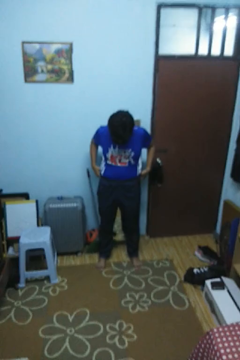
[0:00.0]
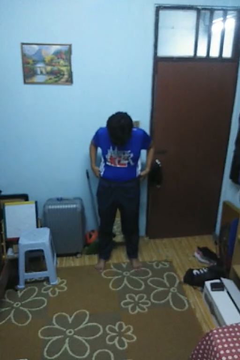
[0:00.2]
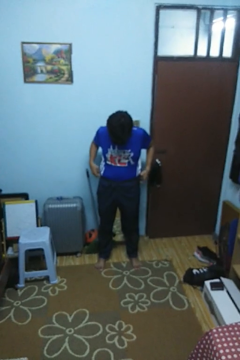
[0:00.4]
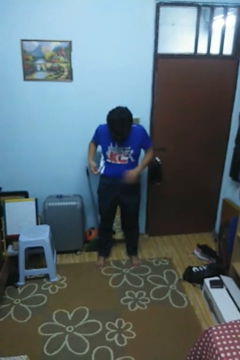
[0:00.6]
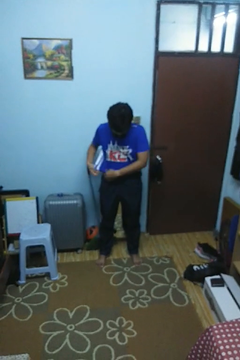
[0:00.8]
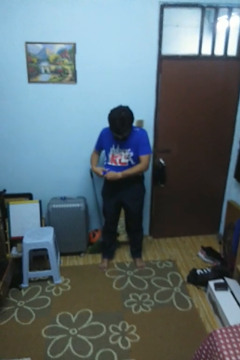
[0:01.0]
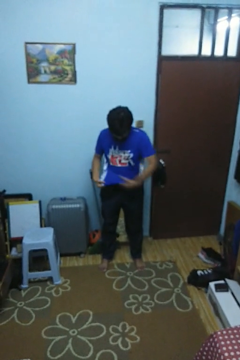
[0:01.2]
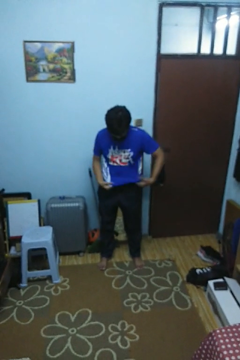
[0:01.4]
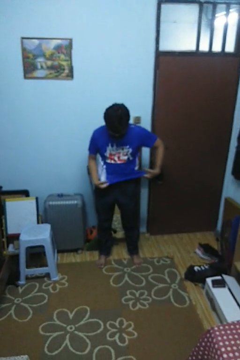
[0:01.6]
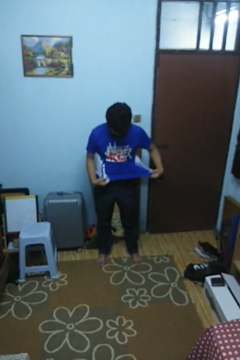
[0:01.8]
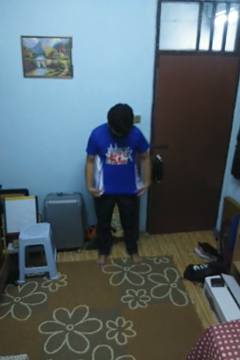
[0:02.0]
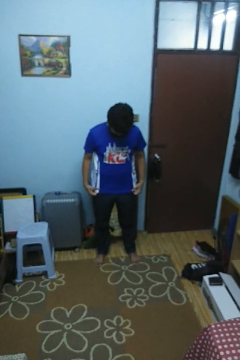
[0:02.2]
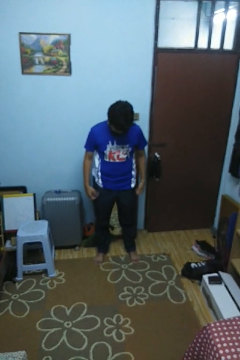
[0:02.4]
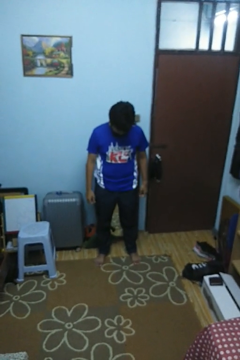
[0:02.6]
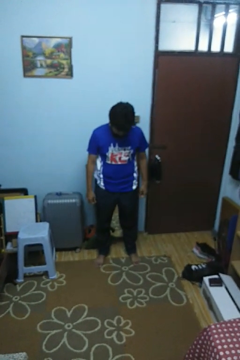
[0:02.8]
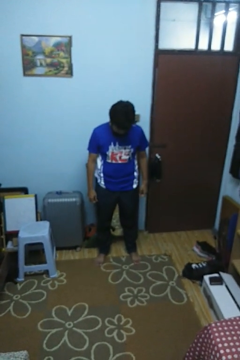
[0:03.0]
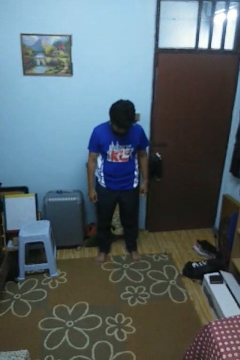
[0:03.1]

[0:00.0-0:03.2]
person untucks shirt

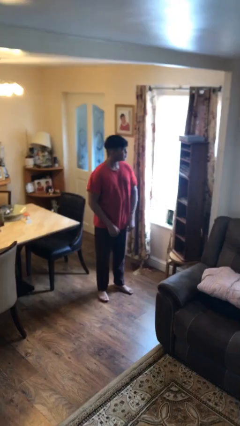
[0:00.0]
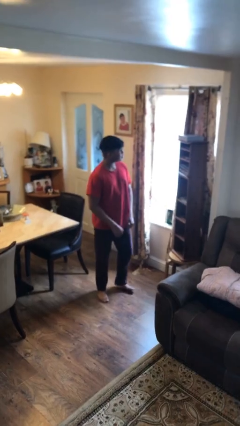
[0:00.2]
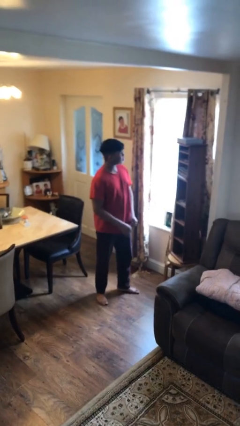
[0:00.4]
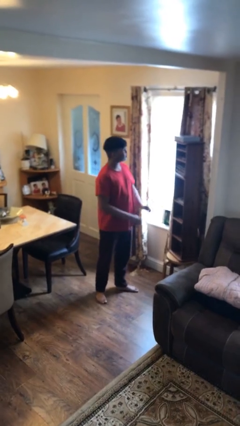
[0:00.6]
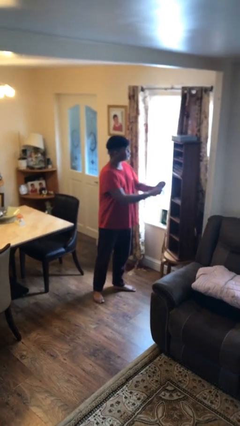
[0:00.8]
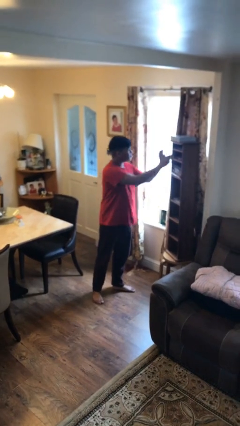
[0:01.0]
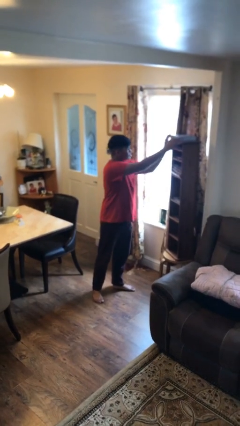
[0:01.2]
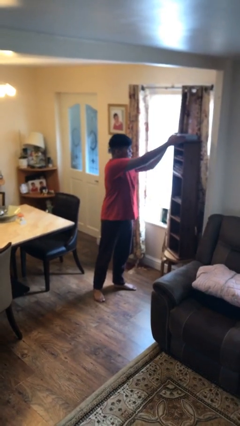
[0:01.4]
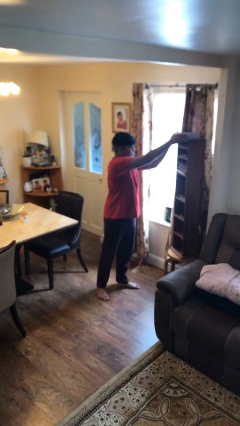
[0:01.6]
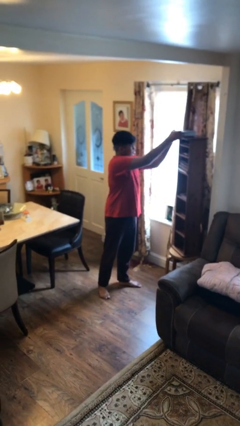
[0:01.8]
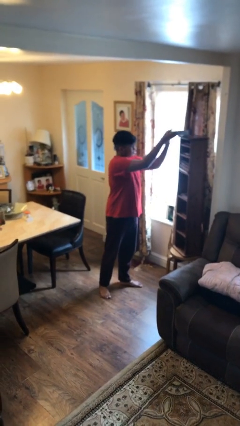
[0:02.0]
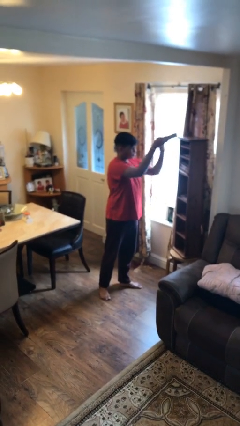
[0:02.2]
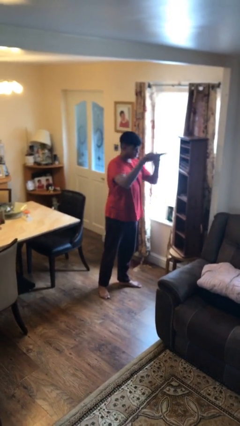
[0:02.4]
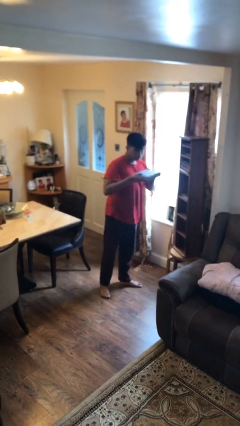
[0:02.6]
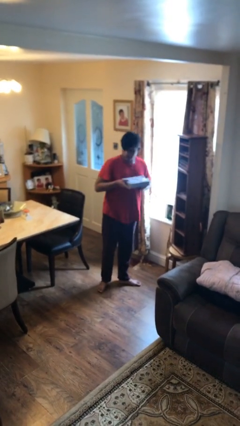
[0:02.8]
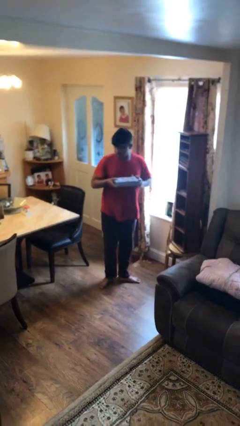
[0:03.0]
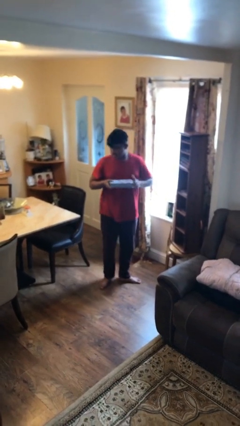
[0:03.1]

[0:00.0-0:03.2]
person picks up object from shelf

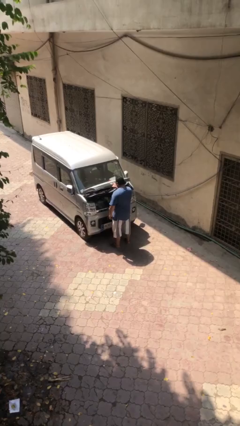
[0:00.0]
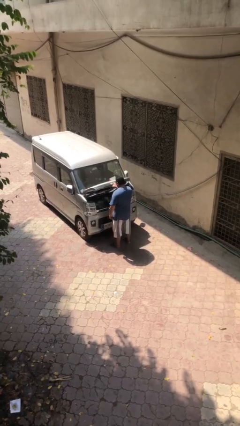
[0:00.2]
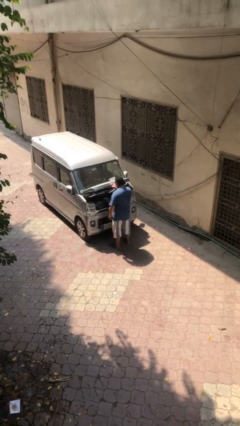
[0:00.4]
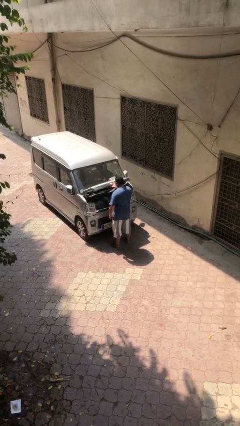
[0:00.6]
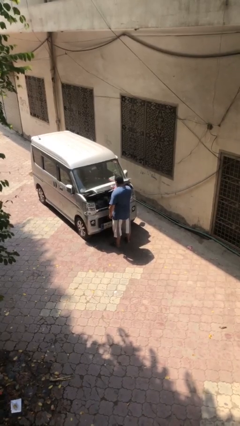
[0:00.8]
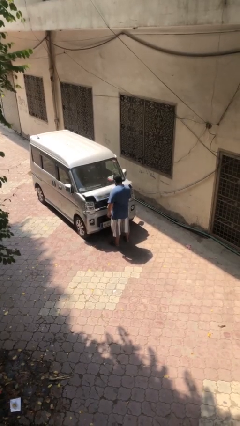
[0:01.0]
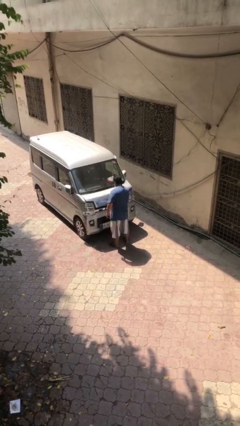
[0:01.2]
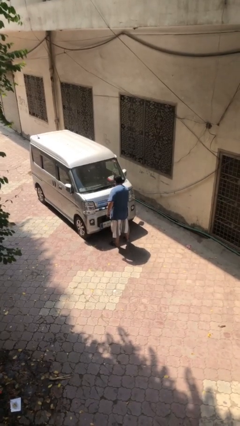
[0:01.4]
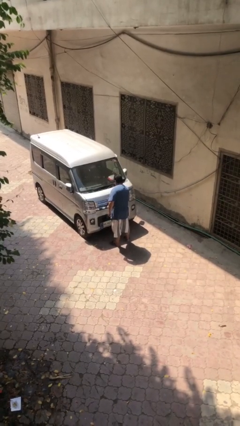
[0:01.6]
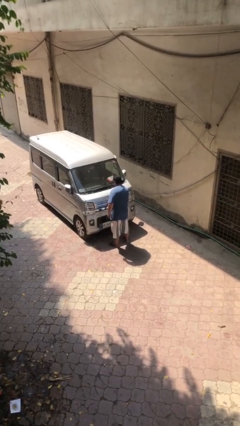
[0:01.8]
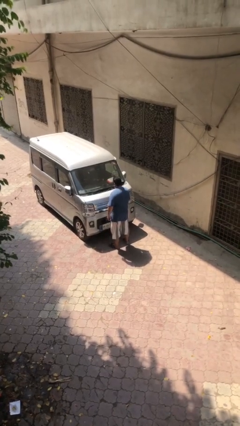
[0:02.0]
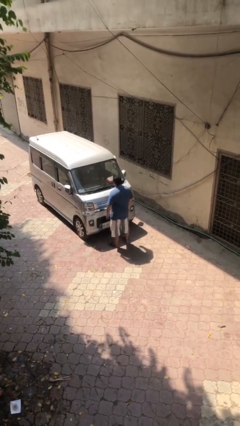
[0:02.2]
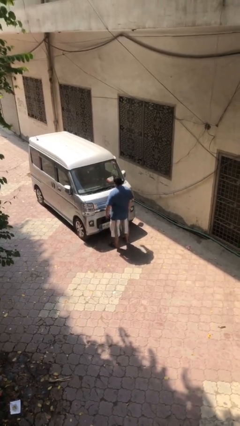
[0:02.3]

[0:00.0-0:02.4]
person closes car hood

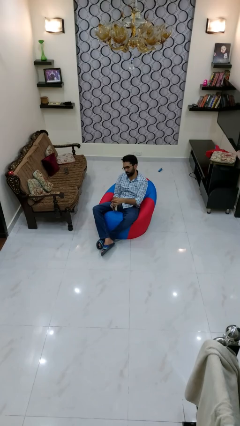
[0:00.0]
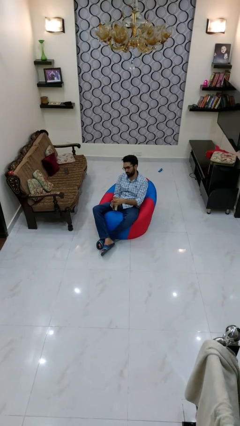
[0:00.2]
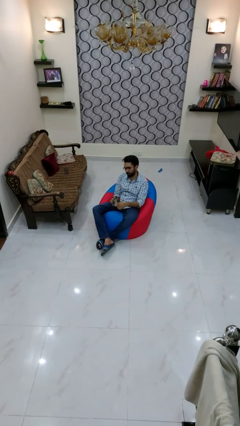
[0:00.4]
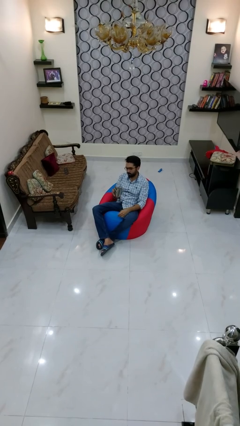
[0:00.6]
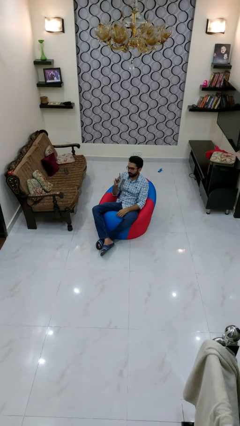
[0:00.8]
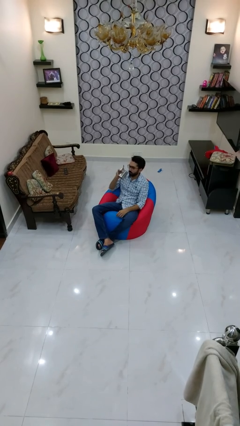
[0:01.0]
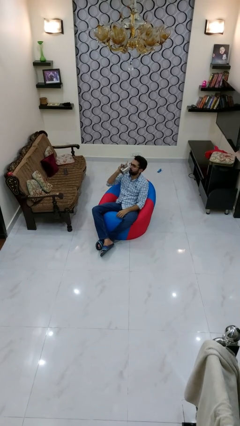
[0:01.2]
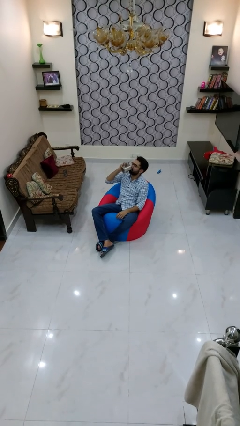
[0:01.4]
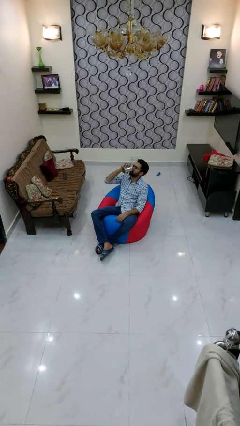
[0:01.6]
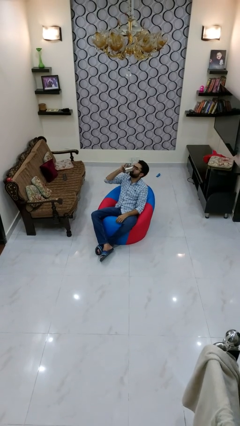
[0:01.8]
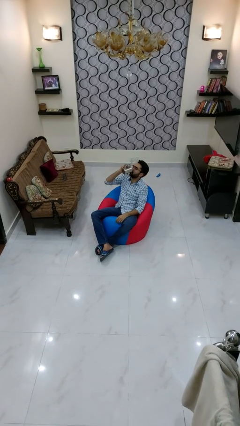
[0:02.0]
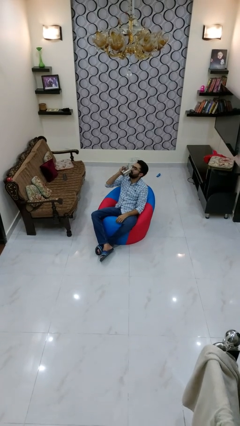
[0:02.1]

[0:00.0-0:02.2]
person drinks from mug

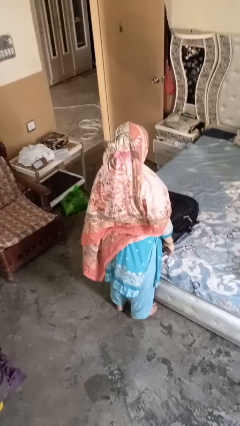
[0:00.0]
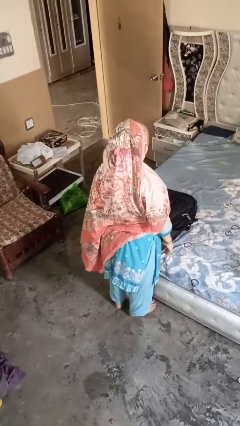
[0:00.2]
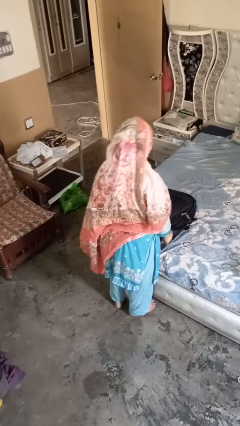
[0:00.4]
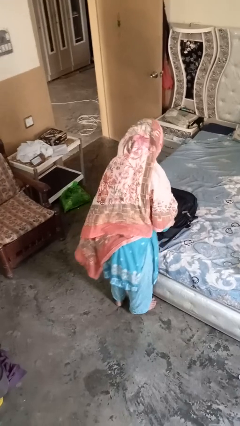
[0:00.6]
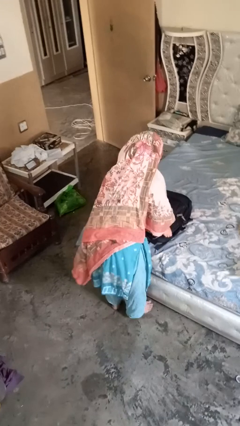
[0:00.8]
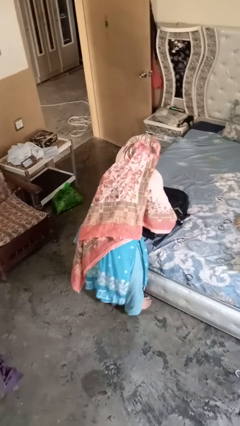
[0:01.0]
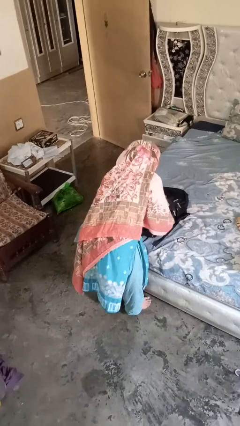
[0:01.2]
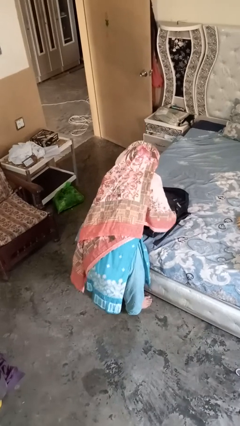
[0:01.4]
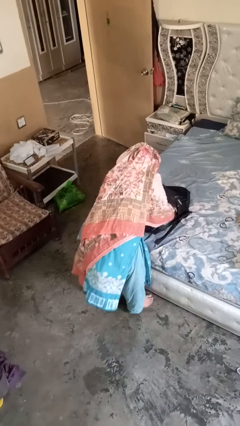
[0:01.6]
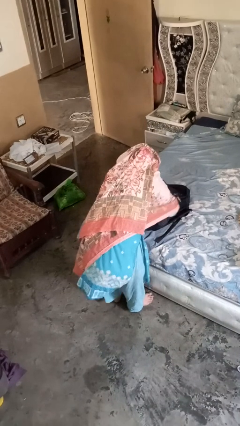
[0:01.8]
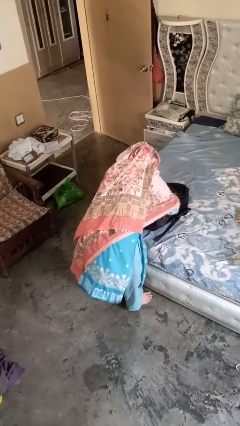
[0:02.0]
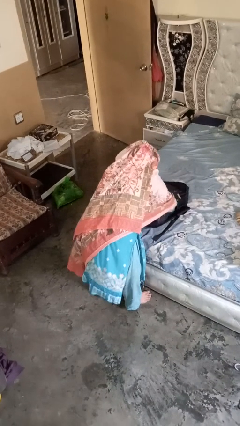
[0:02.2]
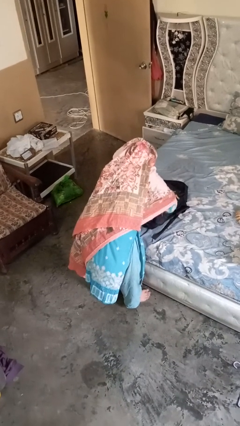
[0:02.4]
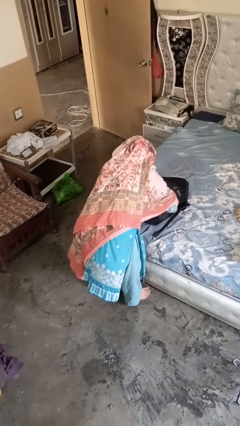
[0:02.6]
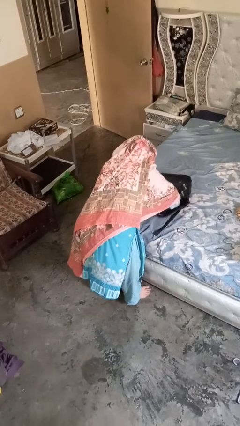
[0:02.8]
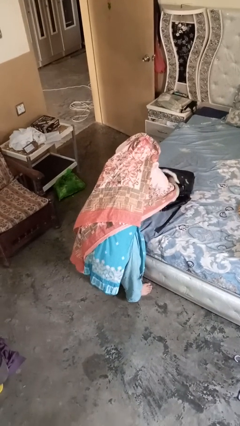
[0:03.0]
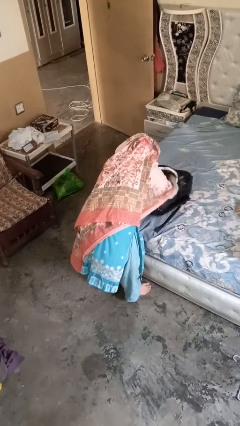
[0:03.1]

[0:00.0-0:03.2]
person searches in bag

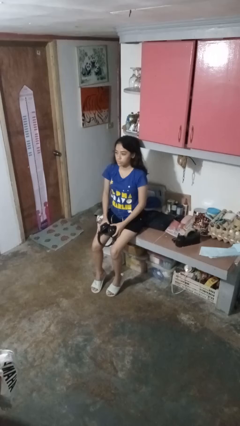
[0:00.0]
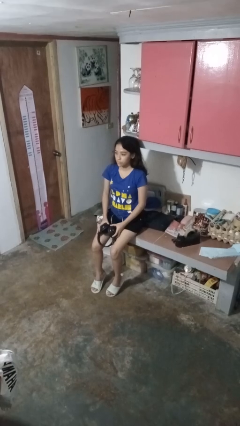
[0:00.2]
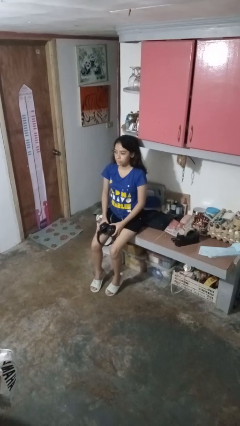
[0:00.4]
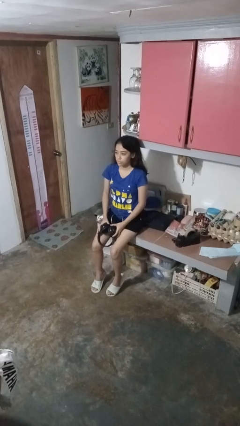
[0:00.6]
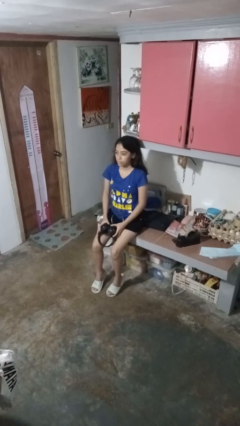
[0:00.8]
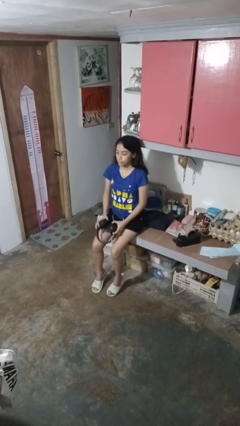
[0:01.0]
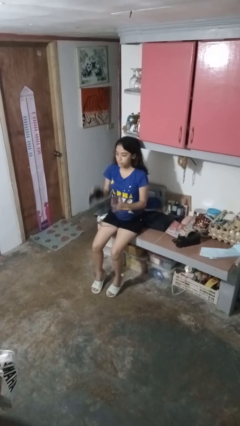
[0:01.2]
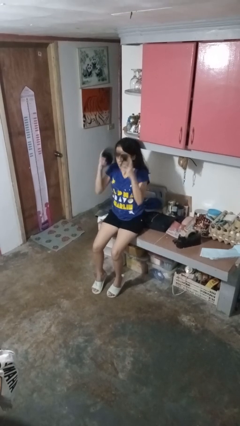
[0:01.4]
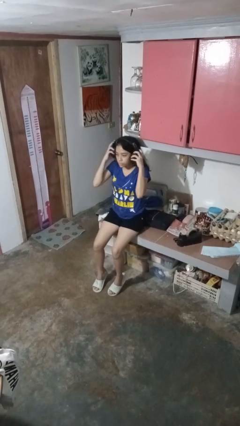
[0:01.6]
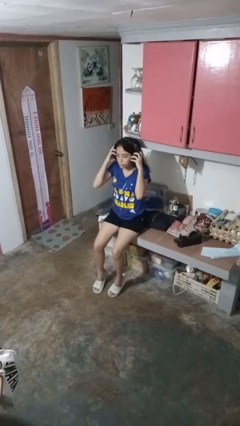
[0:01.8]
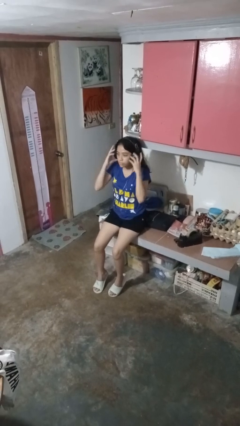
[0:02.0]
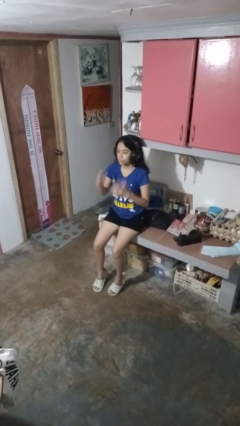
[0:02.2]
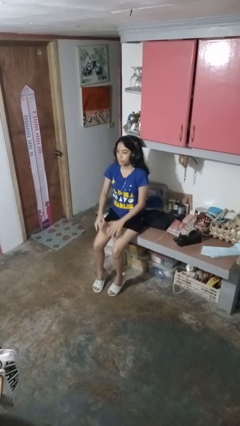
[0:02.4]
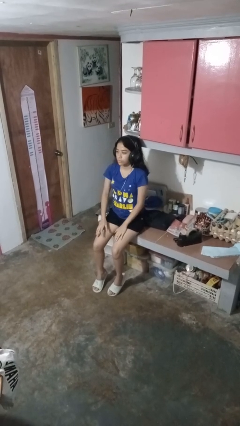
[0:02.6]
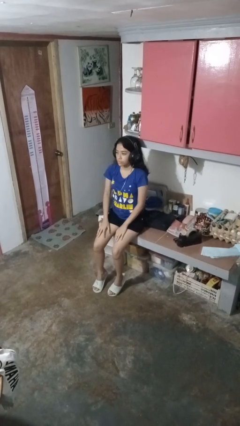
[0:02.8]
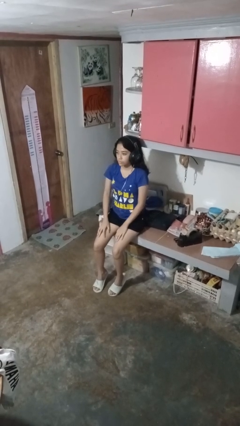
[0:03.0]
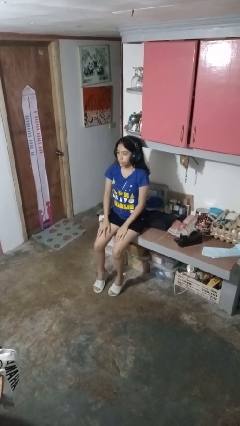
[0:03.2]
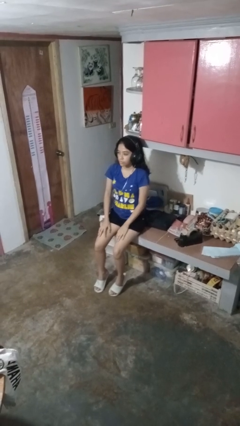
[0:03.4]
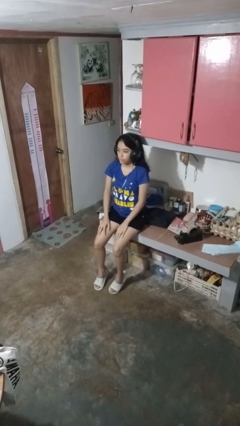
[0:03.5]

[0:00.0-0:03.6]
person puts on headphones

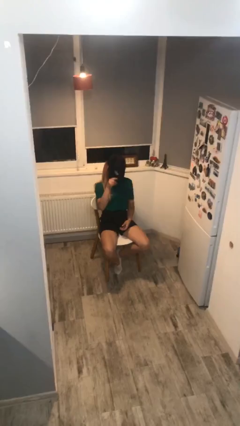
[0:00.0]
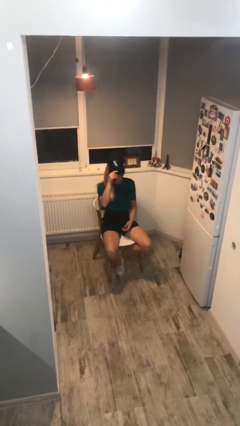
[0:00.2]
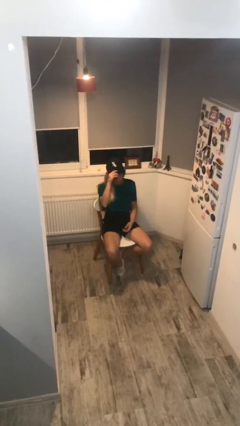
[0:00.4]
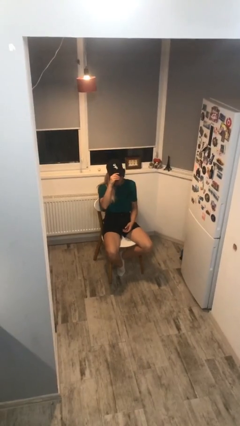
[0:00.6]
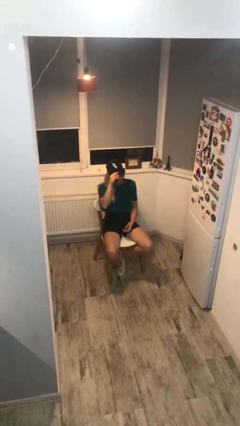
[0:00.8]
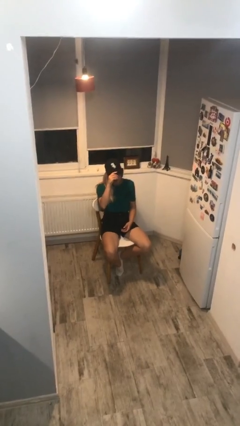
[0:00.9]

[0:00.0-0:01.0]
person puts on hat
